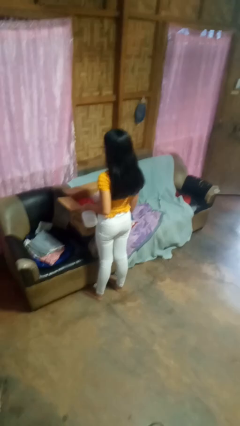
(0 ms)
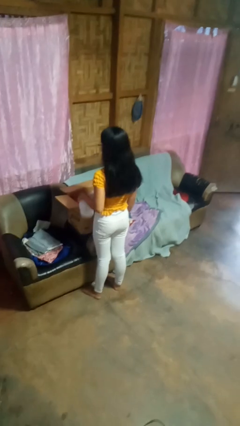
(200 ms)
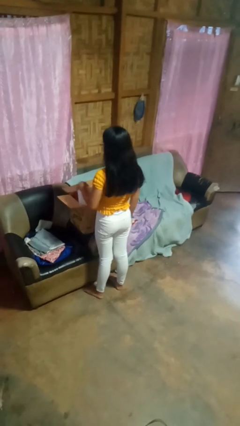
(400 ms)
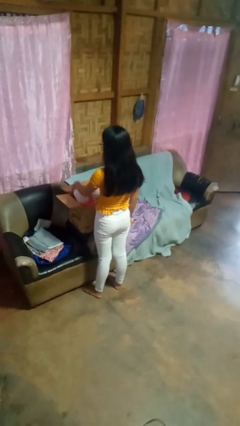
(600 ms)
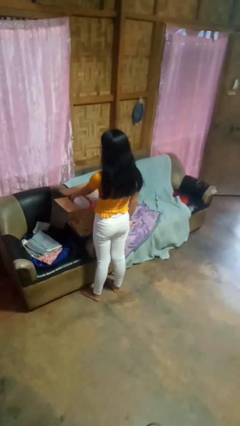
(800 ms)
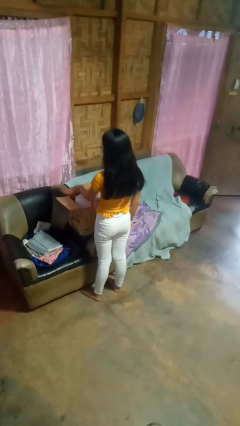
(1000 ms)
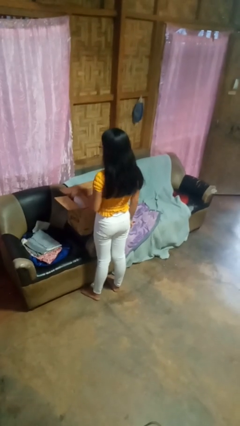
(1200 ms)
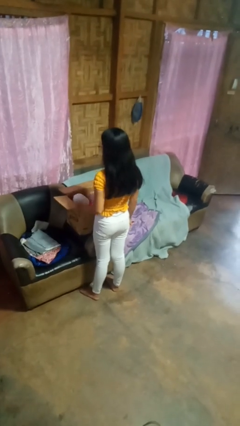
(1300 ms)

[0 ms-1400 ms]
person puts object into box

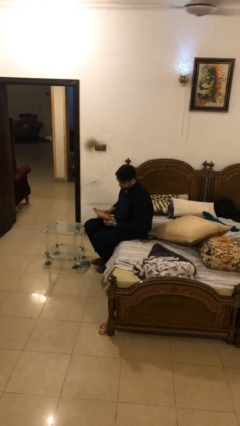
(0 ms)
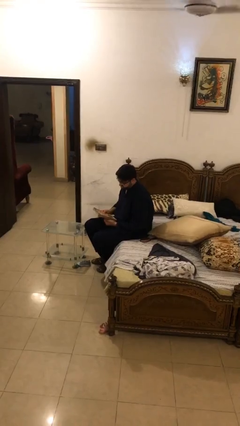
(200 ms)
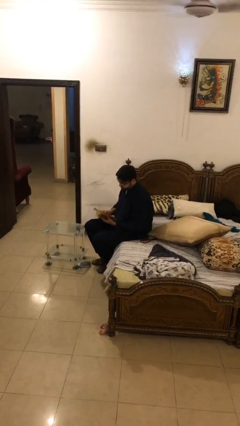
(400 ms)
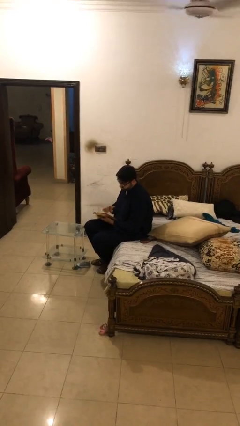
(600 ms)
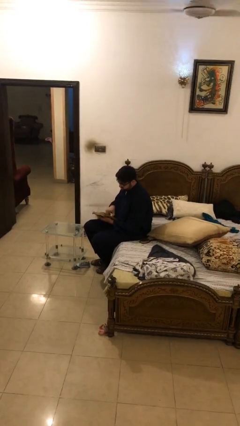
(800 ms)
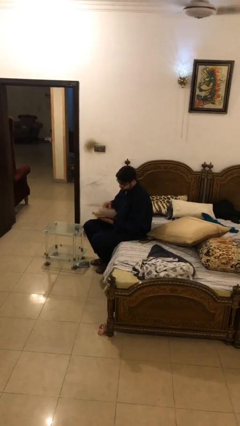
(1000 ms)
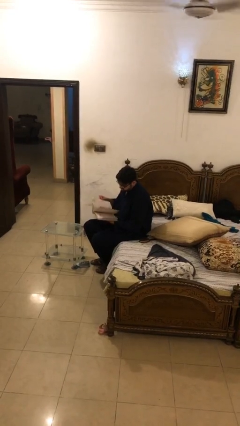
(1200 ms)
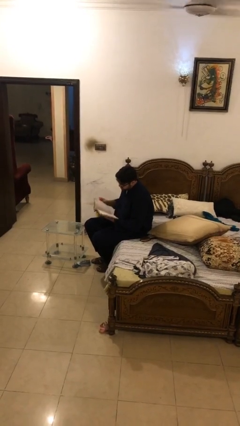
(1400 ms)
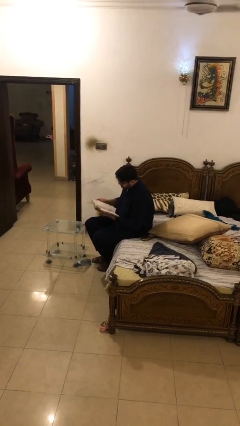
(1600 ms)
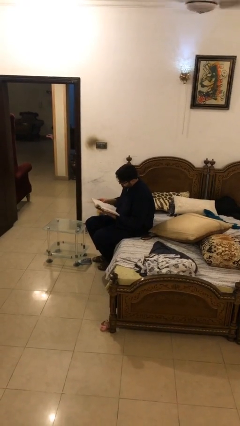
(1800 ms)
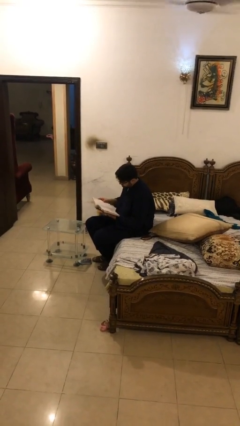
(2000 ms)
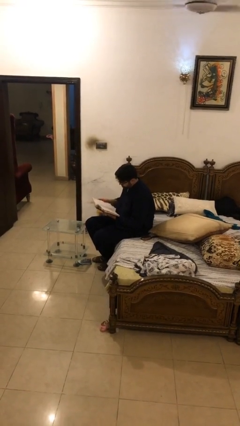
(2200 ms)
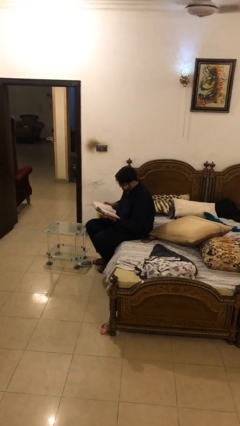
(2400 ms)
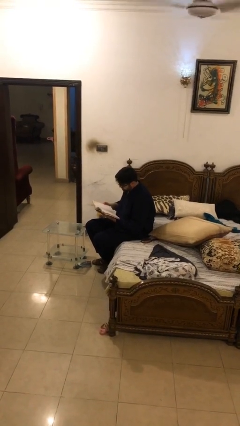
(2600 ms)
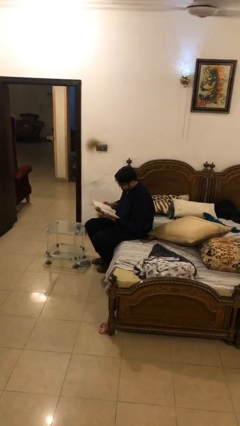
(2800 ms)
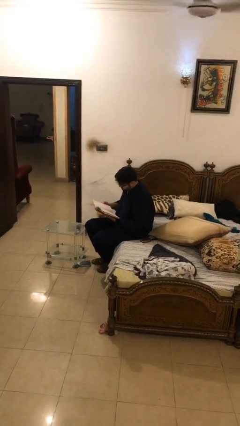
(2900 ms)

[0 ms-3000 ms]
person reads document

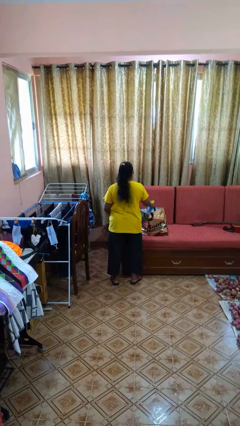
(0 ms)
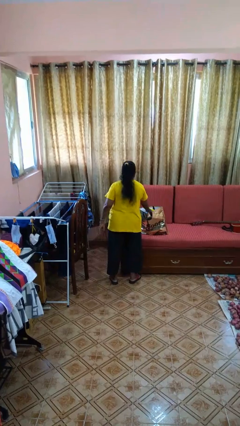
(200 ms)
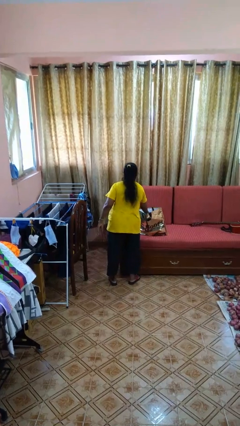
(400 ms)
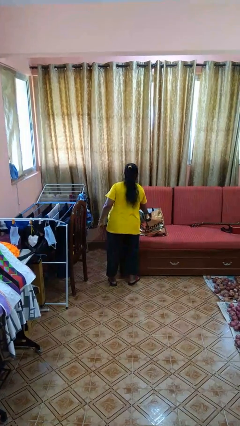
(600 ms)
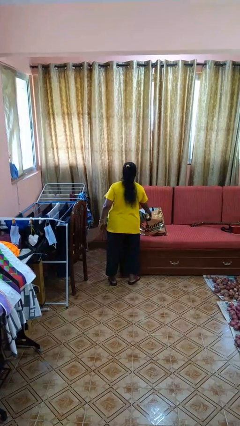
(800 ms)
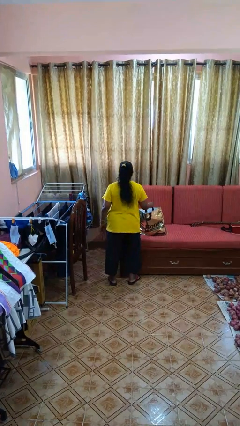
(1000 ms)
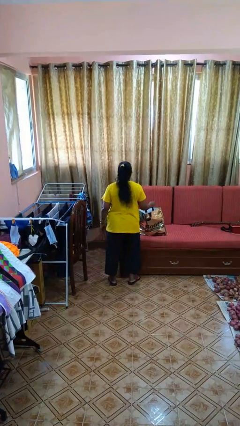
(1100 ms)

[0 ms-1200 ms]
person puts object into bag

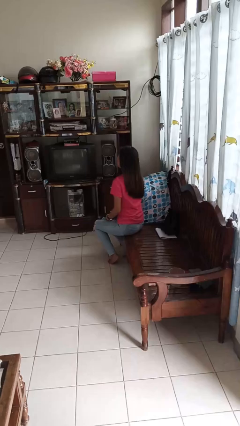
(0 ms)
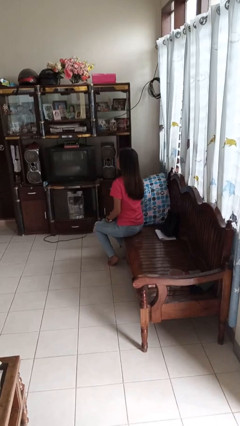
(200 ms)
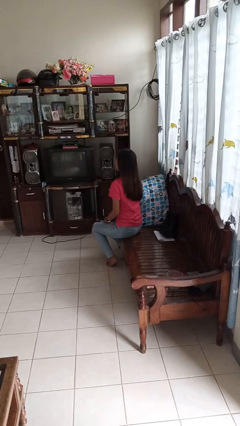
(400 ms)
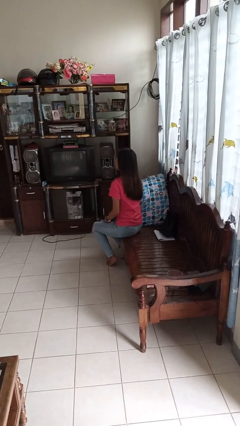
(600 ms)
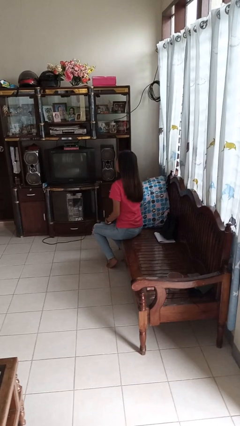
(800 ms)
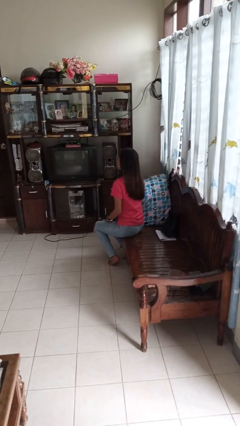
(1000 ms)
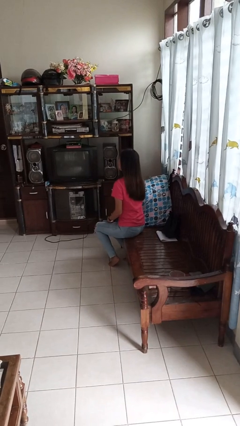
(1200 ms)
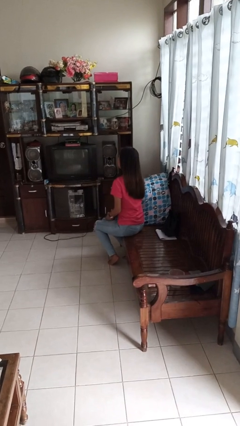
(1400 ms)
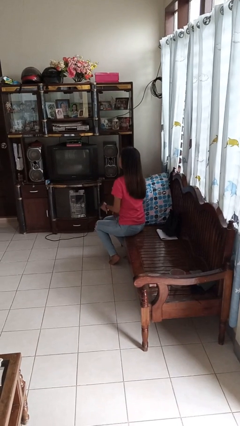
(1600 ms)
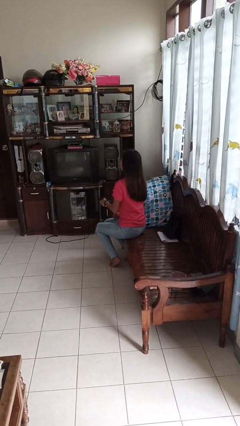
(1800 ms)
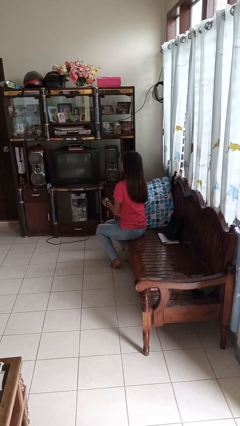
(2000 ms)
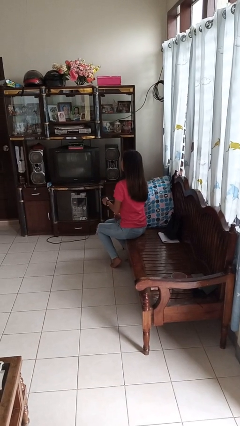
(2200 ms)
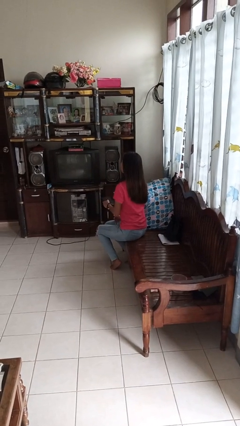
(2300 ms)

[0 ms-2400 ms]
person uses television remote

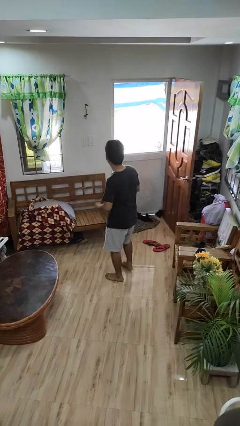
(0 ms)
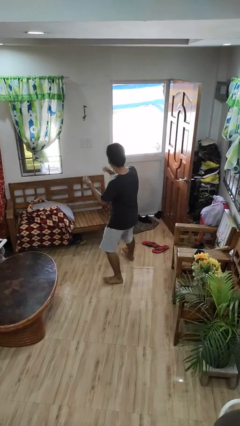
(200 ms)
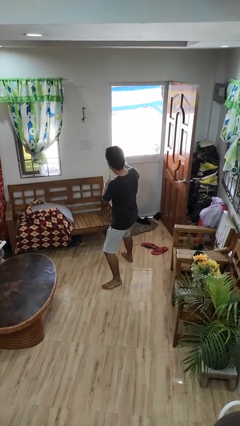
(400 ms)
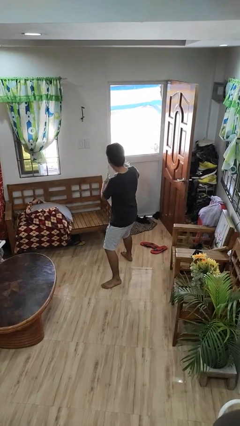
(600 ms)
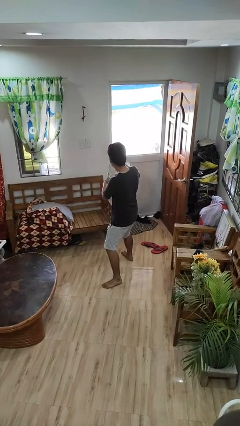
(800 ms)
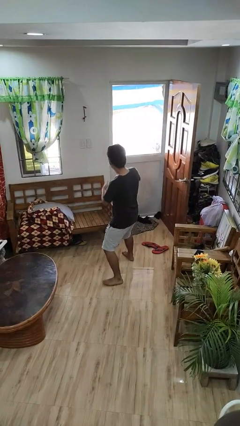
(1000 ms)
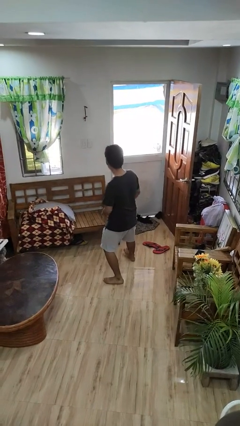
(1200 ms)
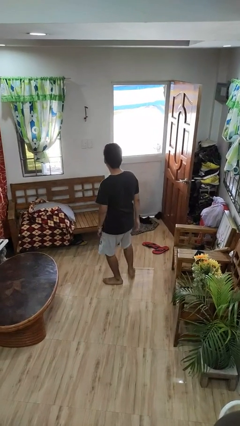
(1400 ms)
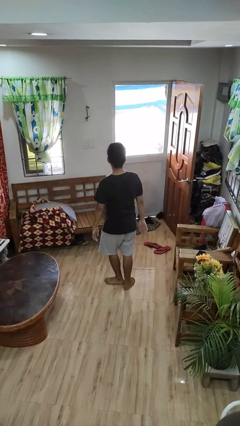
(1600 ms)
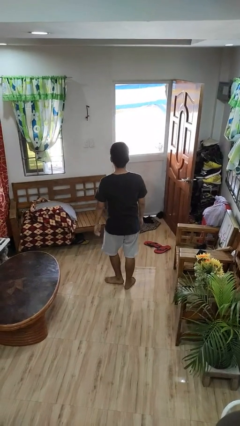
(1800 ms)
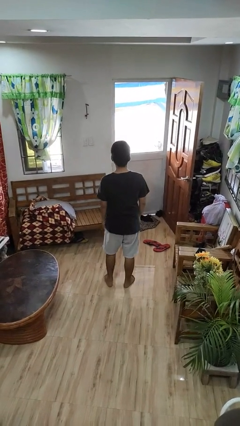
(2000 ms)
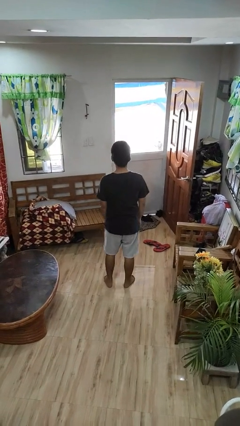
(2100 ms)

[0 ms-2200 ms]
person karate chop

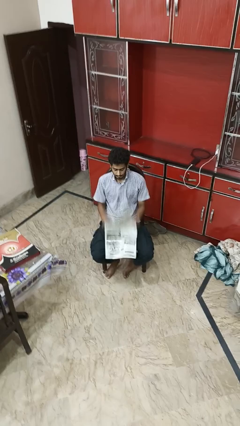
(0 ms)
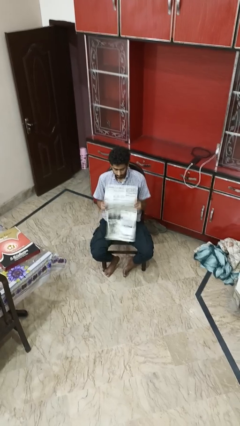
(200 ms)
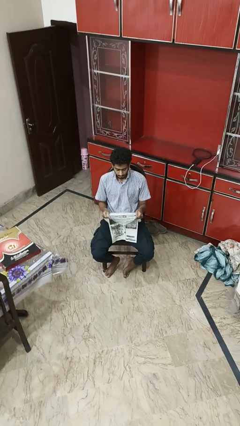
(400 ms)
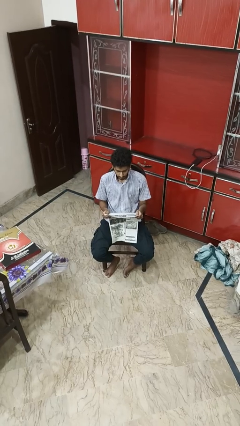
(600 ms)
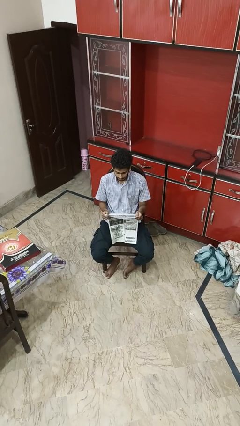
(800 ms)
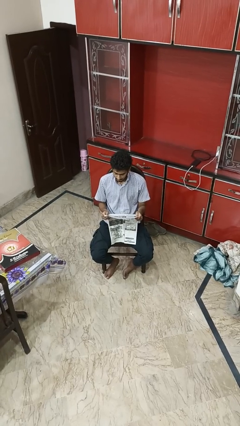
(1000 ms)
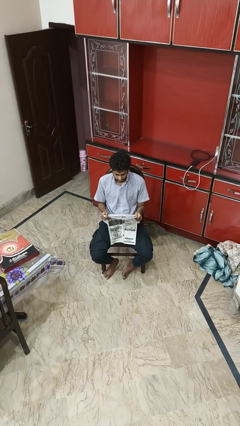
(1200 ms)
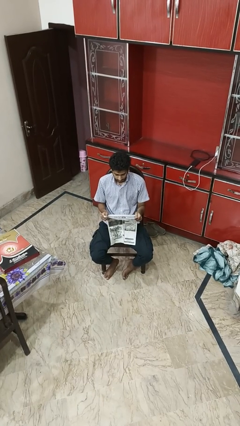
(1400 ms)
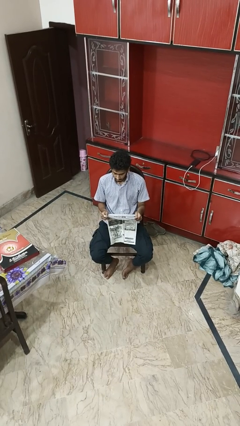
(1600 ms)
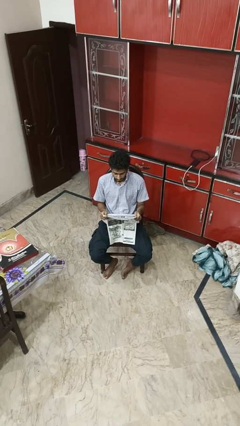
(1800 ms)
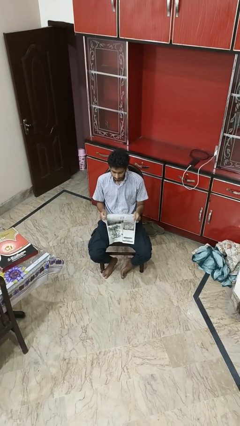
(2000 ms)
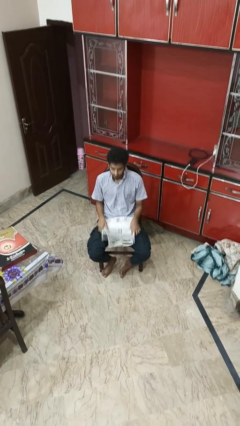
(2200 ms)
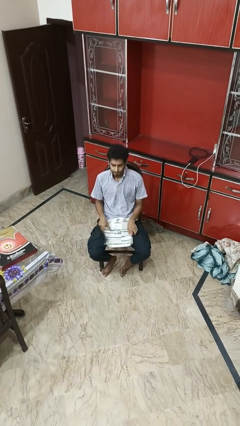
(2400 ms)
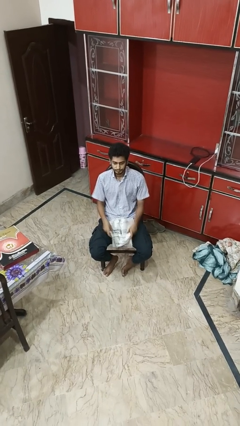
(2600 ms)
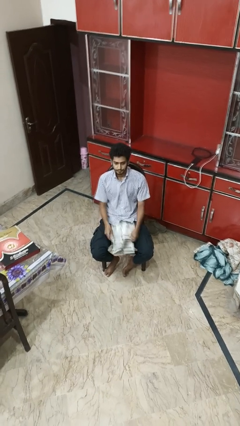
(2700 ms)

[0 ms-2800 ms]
person reads newspaper

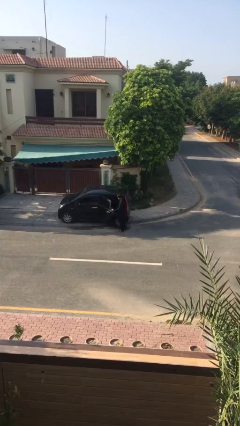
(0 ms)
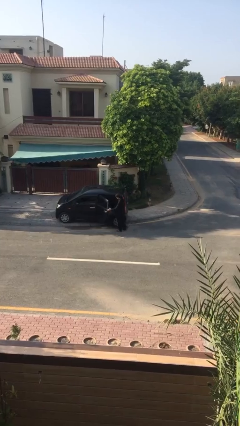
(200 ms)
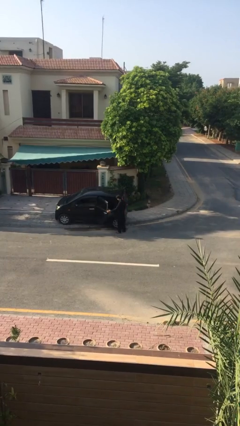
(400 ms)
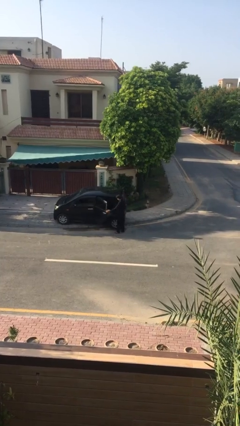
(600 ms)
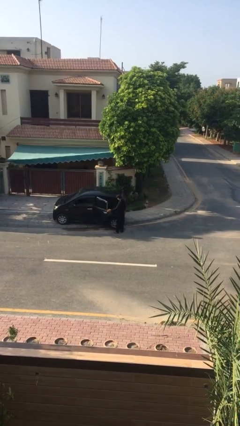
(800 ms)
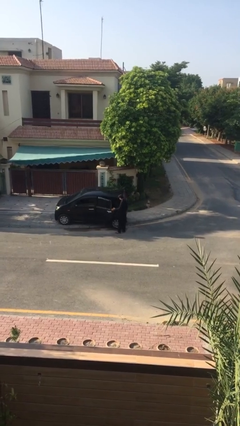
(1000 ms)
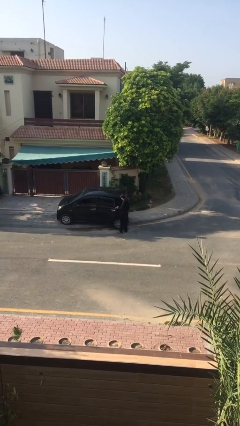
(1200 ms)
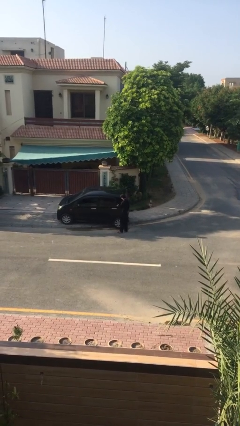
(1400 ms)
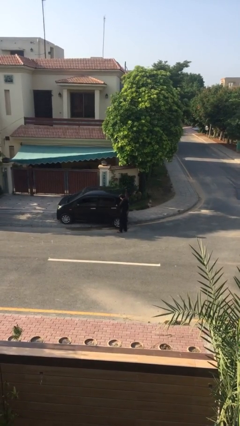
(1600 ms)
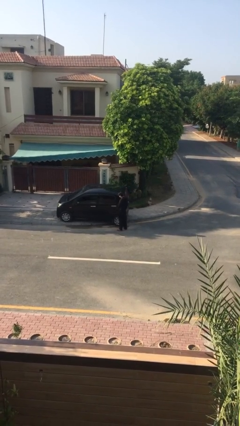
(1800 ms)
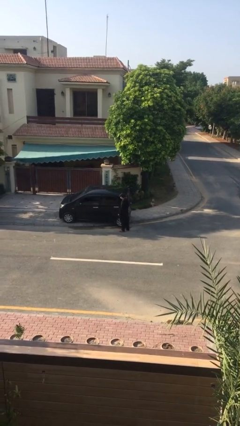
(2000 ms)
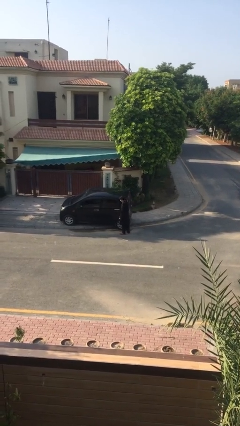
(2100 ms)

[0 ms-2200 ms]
person closes car door

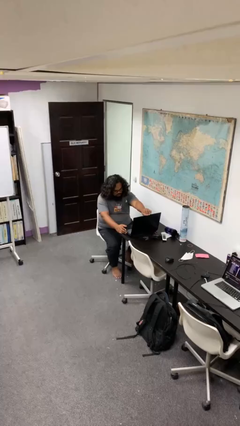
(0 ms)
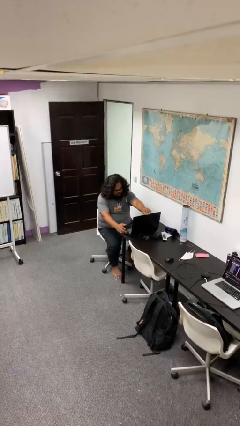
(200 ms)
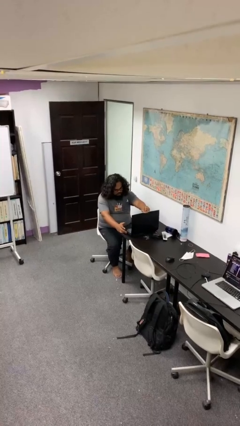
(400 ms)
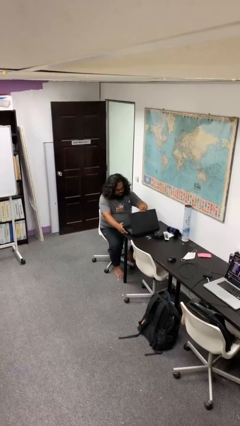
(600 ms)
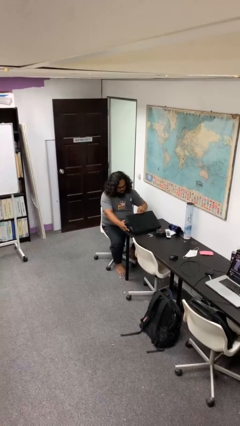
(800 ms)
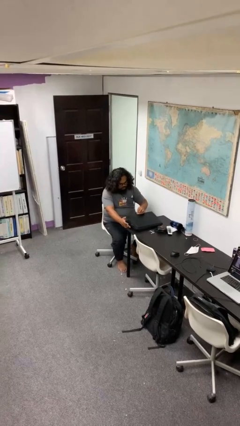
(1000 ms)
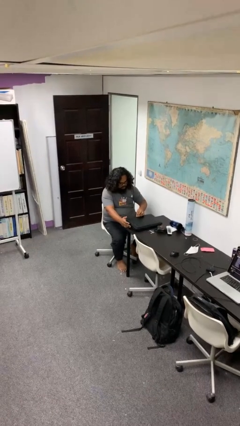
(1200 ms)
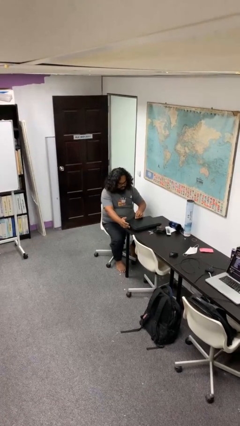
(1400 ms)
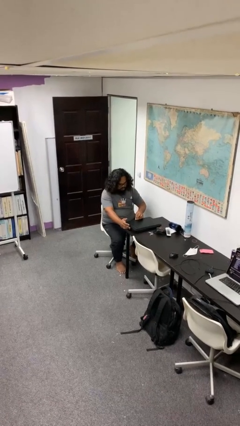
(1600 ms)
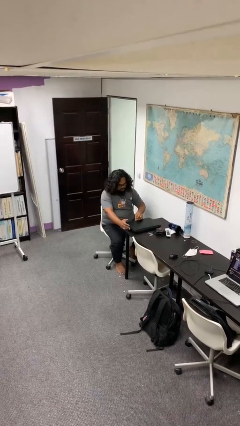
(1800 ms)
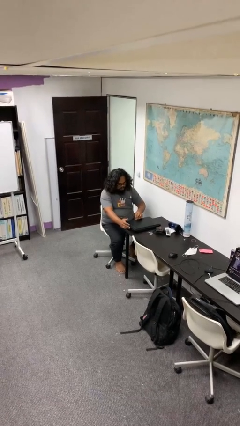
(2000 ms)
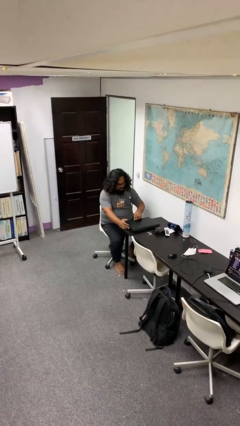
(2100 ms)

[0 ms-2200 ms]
person closes laptop
